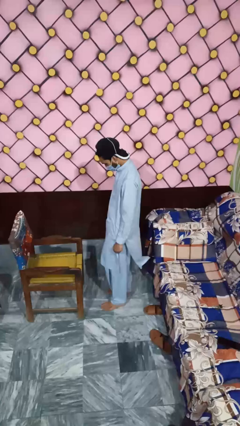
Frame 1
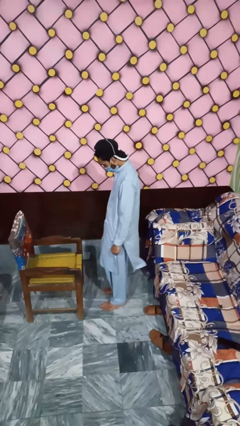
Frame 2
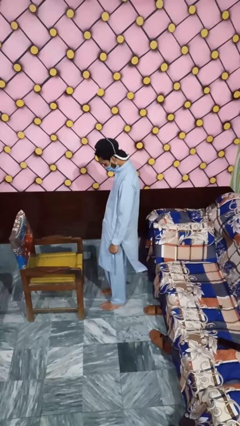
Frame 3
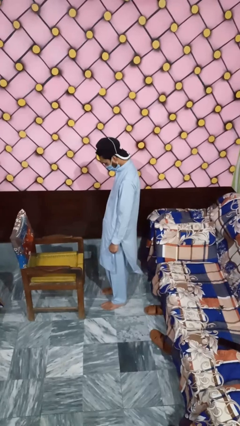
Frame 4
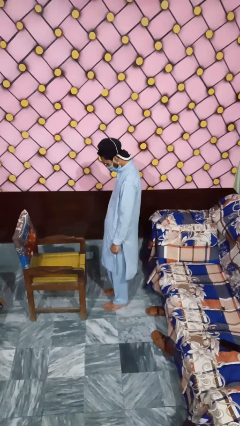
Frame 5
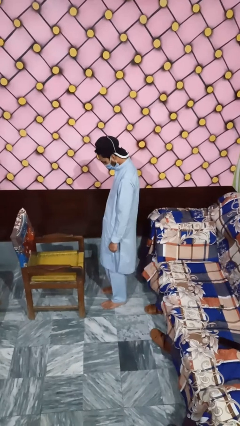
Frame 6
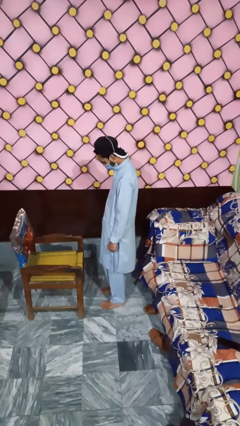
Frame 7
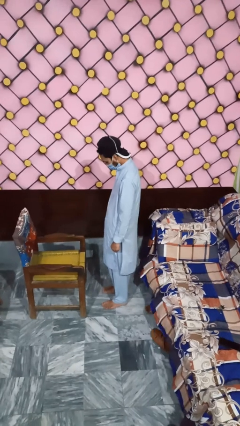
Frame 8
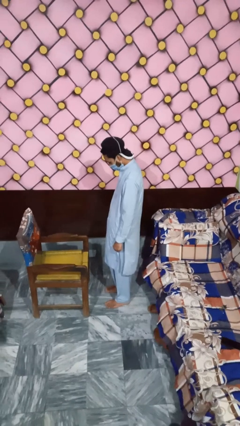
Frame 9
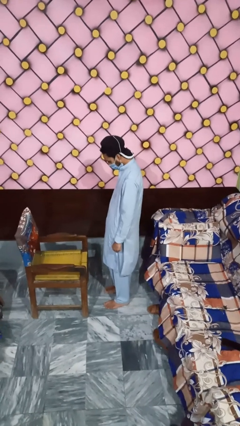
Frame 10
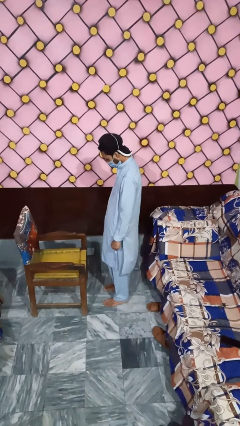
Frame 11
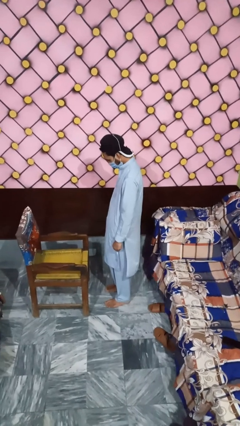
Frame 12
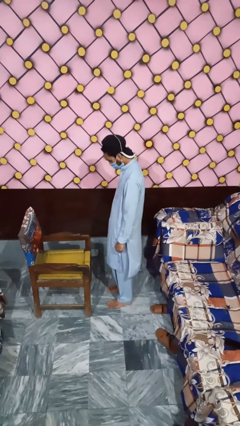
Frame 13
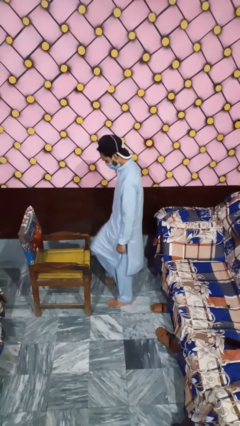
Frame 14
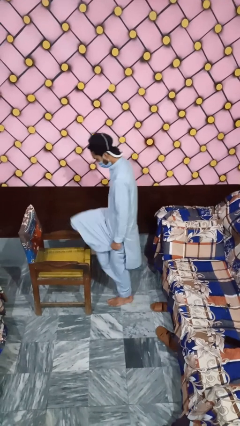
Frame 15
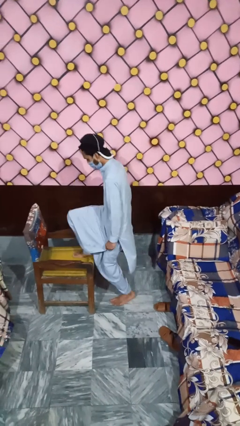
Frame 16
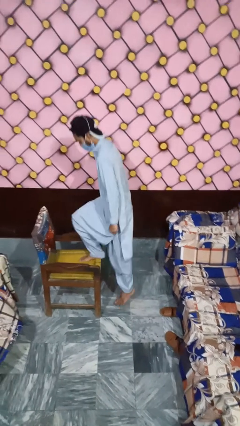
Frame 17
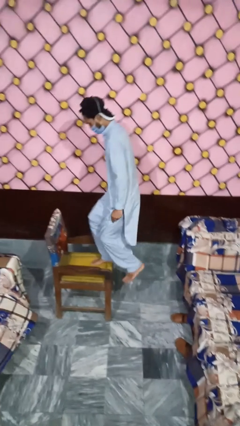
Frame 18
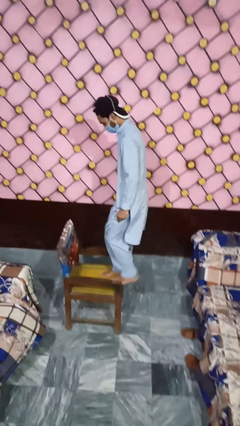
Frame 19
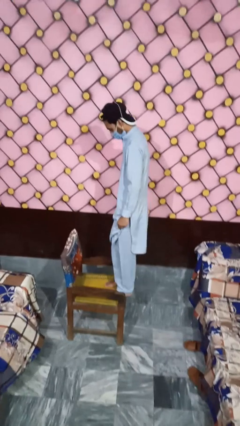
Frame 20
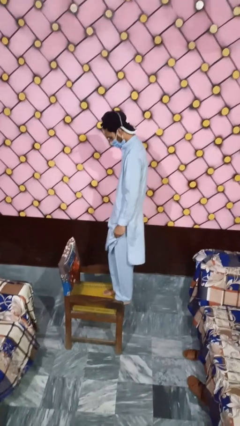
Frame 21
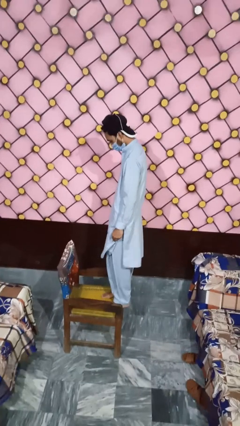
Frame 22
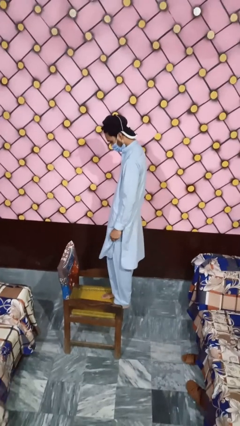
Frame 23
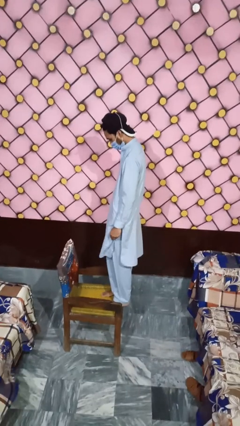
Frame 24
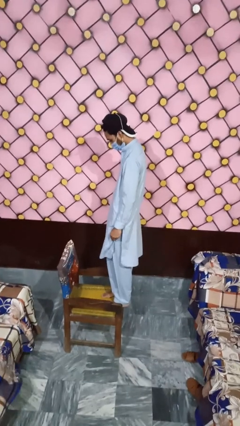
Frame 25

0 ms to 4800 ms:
person climbs on chair

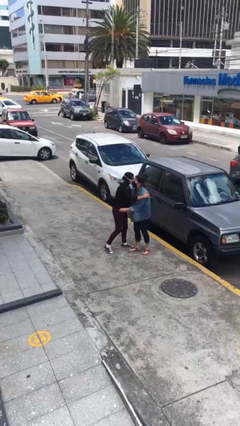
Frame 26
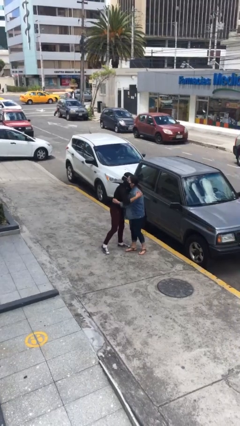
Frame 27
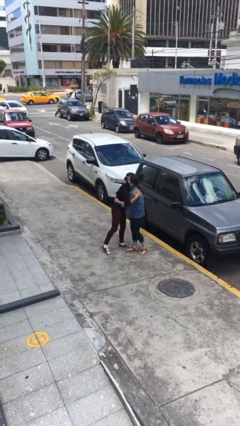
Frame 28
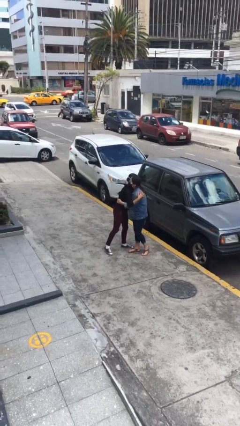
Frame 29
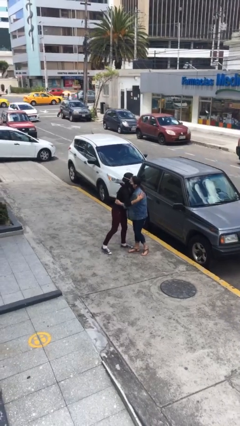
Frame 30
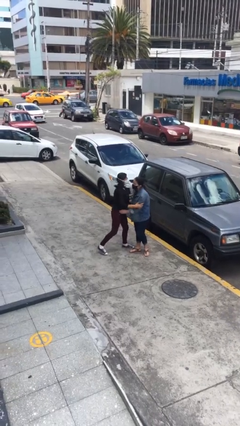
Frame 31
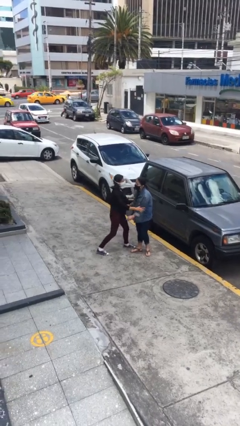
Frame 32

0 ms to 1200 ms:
person embraces person

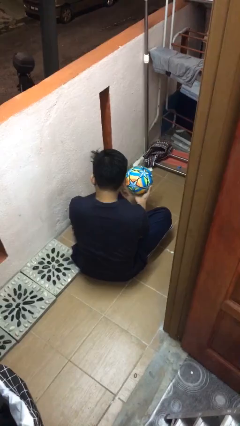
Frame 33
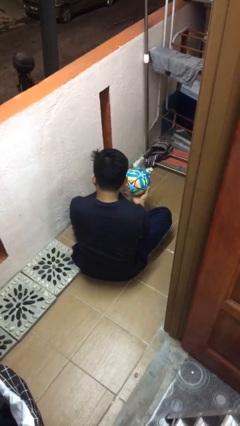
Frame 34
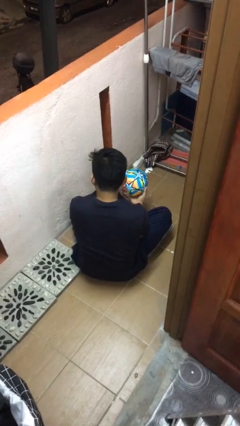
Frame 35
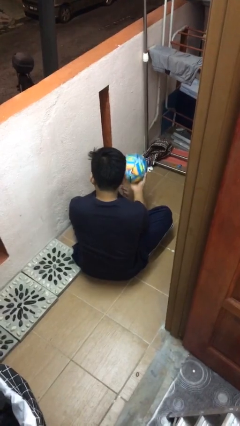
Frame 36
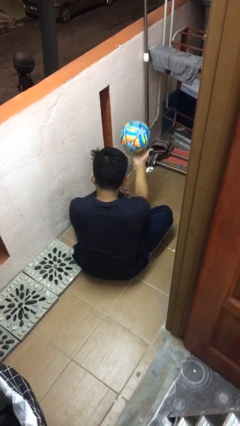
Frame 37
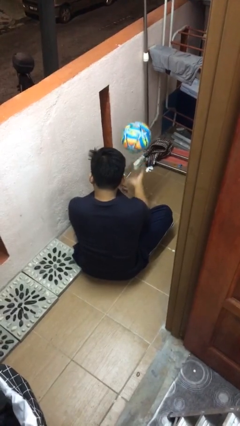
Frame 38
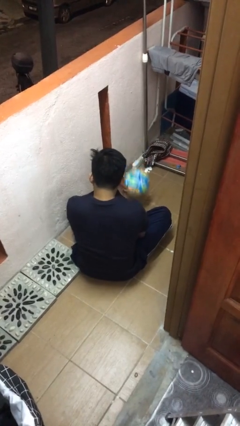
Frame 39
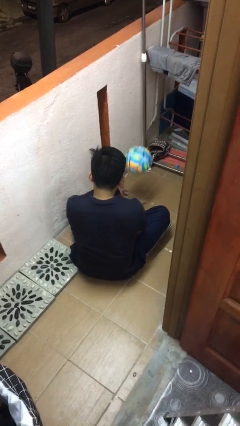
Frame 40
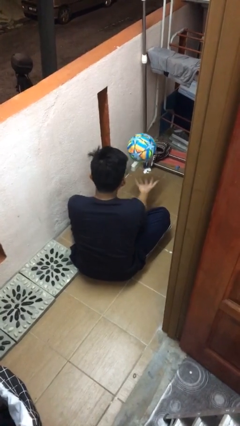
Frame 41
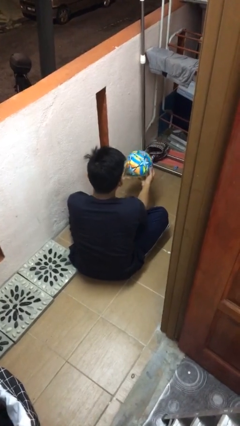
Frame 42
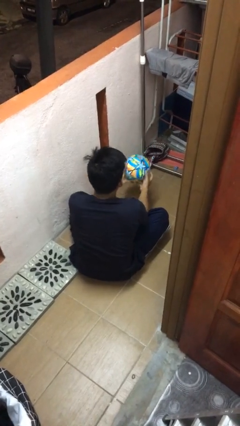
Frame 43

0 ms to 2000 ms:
person bounces ball on floor

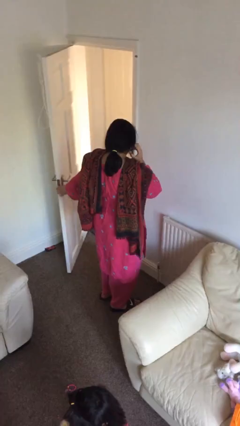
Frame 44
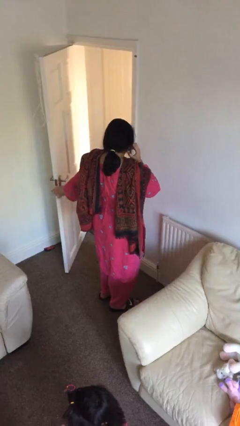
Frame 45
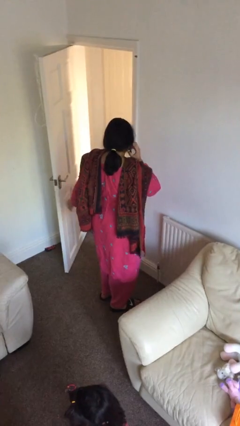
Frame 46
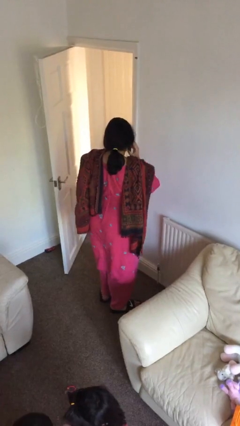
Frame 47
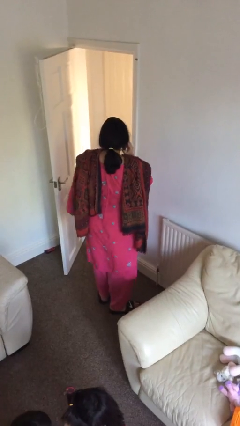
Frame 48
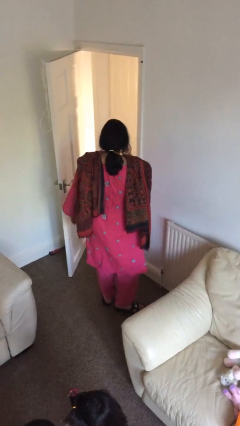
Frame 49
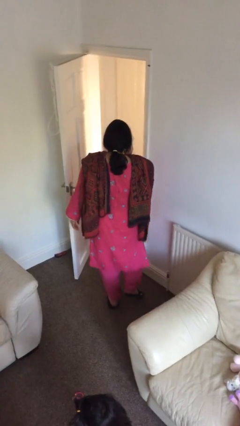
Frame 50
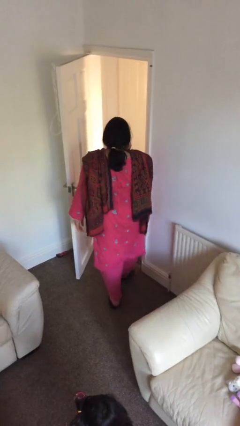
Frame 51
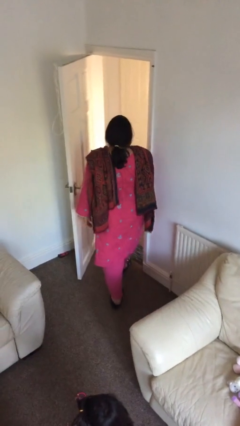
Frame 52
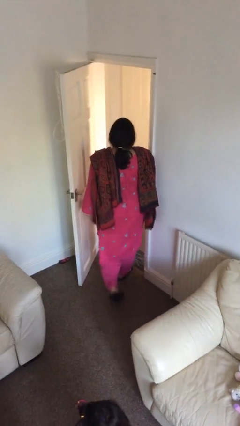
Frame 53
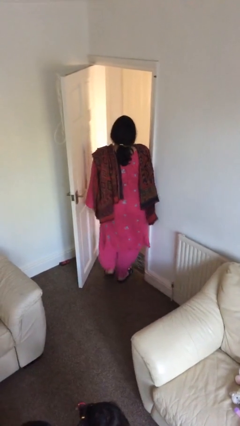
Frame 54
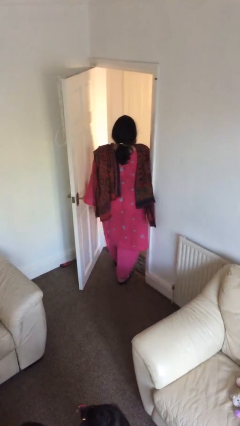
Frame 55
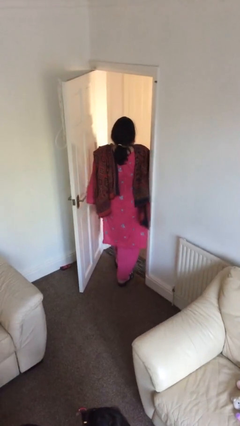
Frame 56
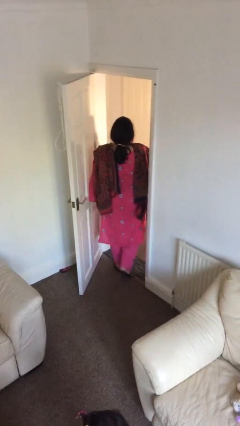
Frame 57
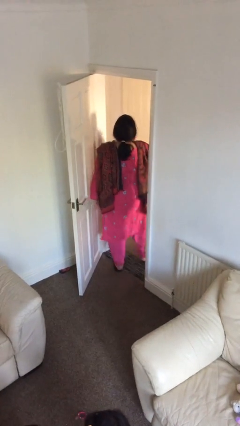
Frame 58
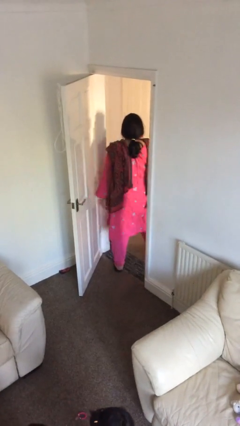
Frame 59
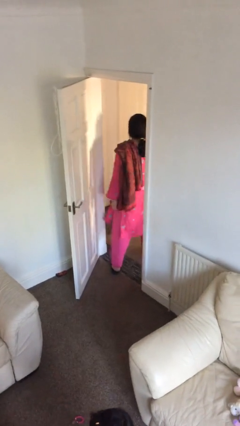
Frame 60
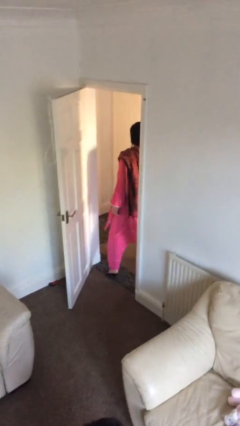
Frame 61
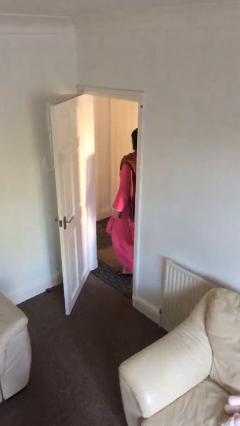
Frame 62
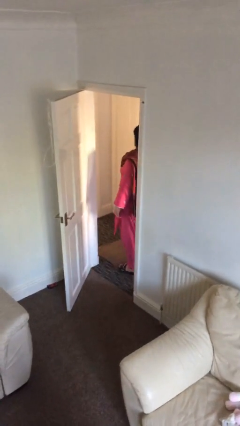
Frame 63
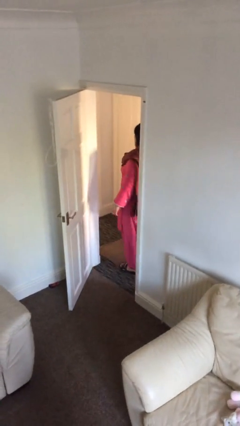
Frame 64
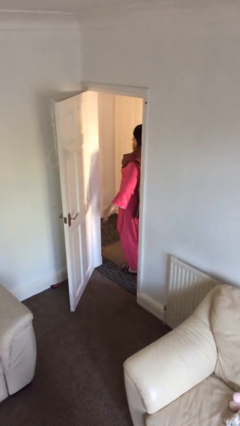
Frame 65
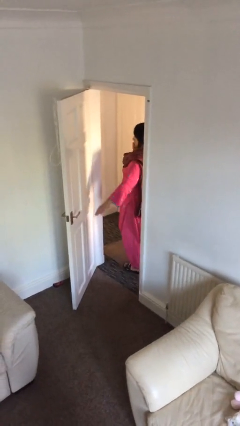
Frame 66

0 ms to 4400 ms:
person exits scene through structure

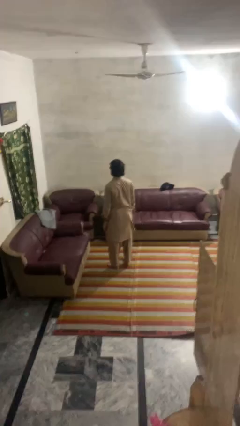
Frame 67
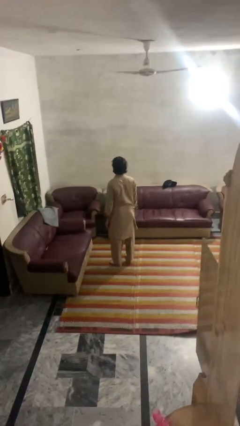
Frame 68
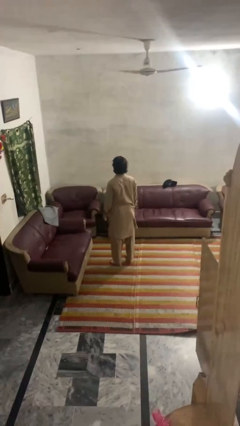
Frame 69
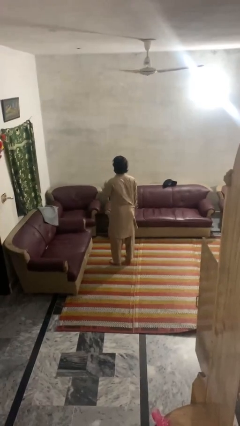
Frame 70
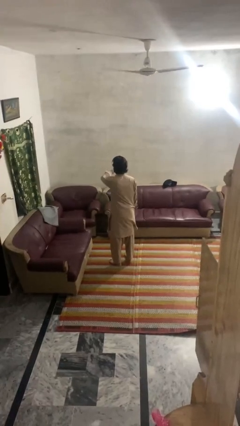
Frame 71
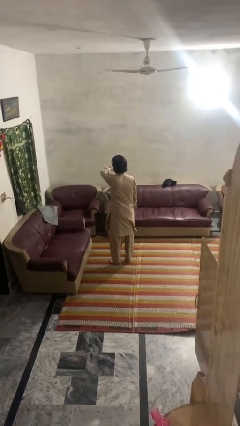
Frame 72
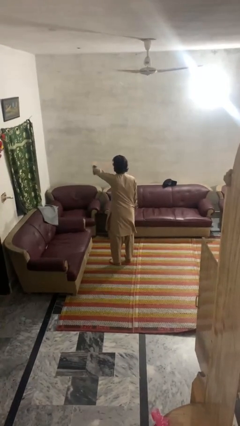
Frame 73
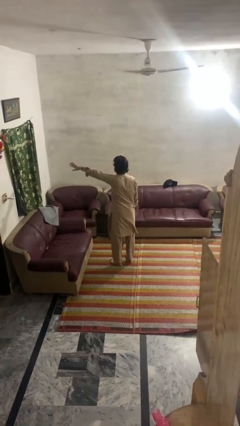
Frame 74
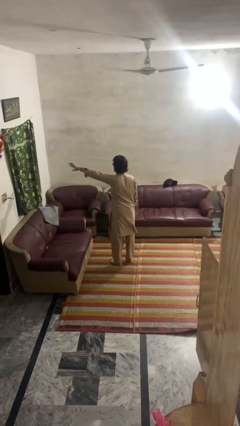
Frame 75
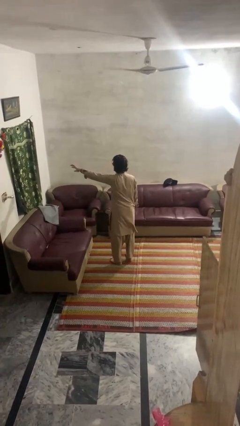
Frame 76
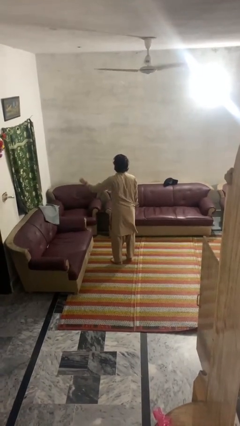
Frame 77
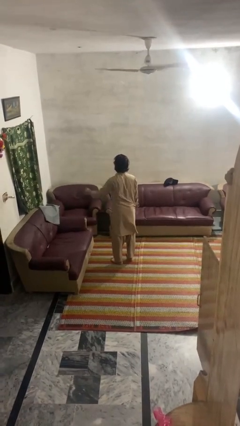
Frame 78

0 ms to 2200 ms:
person gestures swipe left

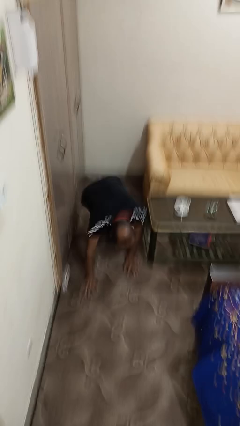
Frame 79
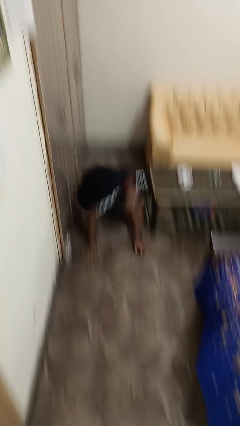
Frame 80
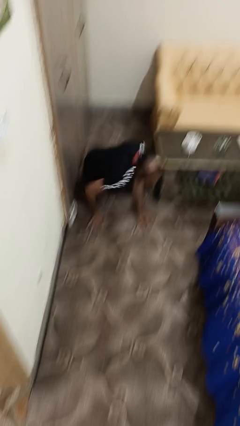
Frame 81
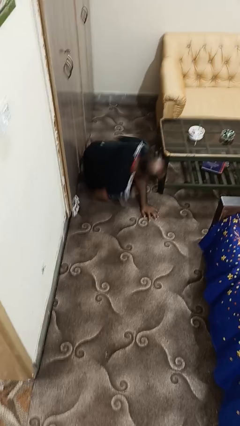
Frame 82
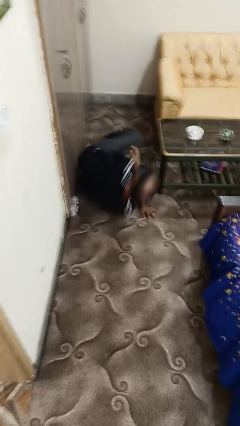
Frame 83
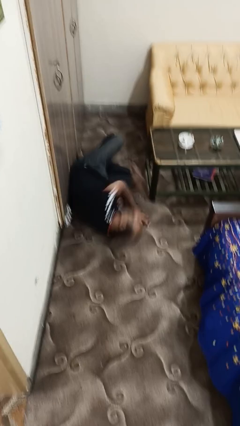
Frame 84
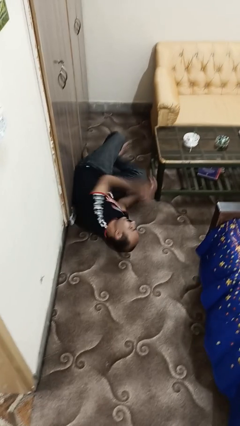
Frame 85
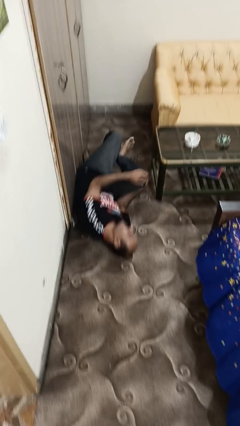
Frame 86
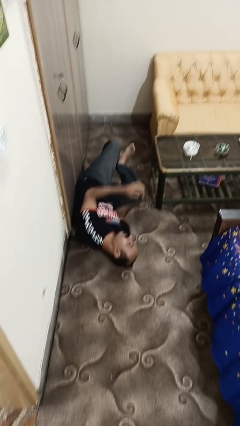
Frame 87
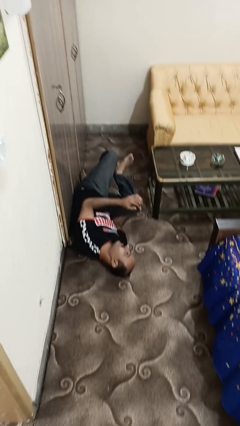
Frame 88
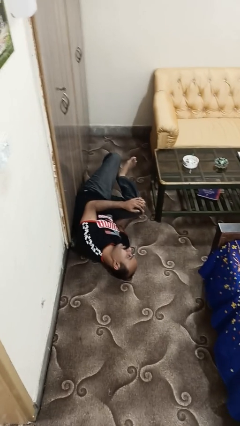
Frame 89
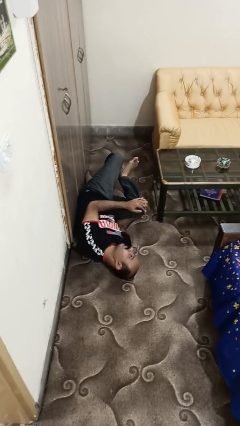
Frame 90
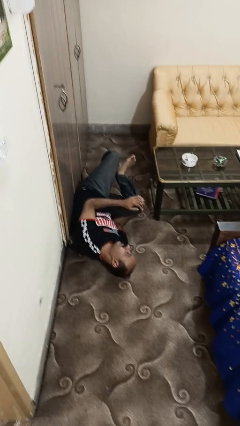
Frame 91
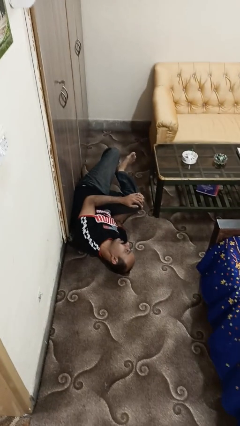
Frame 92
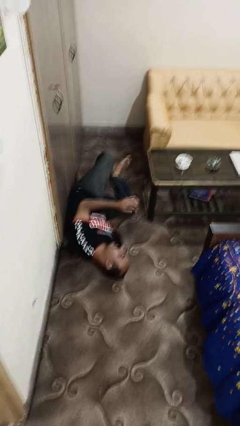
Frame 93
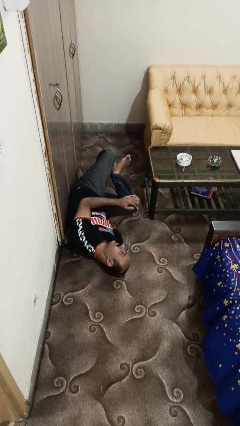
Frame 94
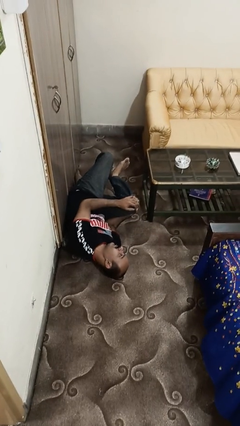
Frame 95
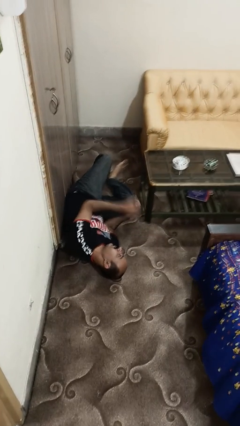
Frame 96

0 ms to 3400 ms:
person lies down on floor
